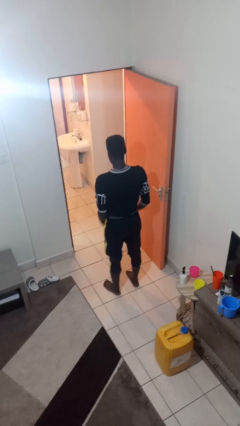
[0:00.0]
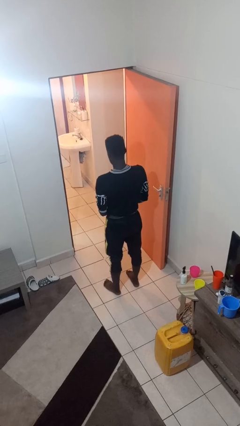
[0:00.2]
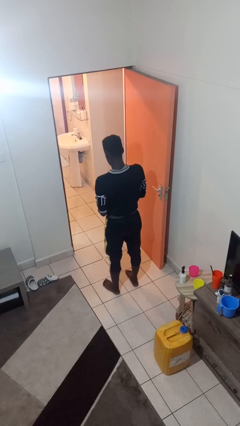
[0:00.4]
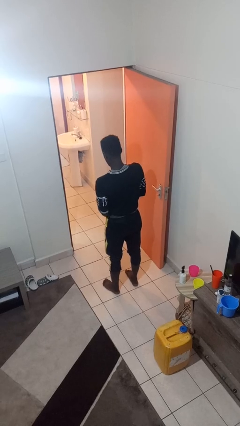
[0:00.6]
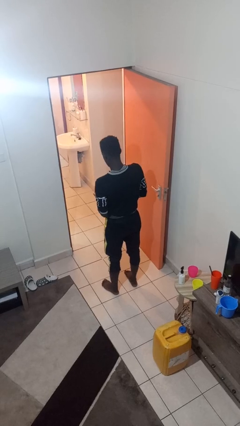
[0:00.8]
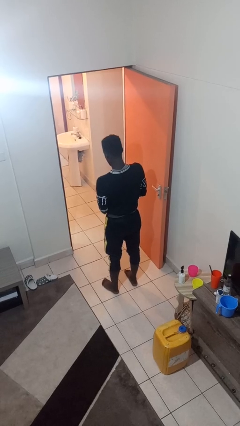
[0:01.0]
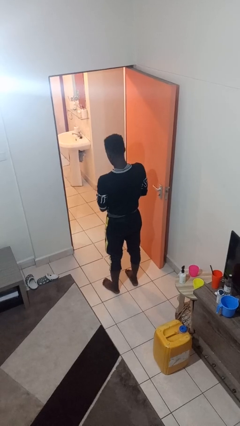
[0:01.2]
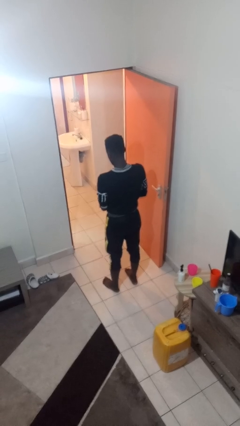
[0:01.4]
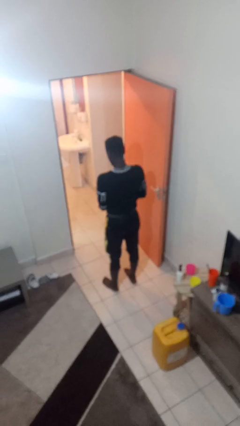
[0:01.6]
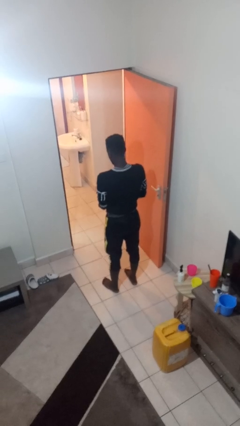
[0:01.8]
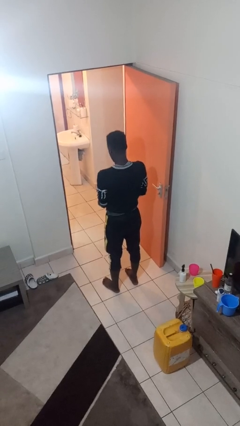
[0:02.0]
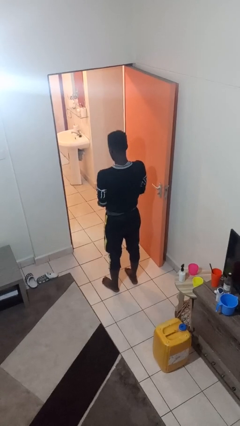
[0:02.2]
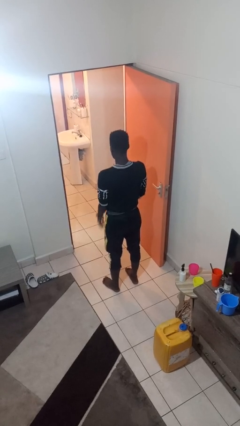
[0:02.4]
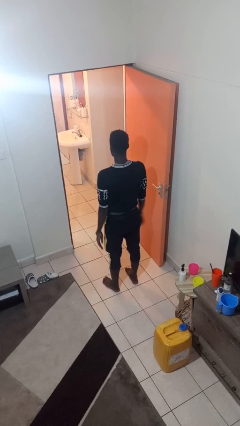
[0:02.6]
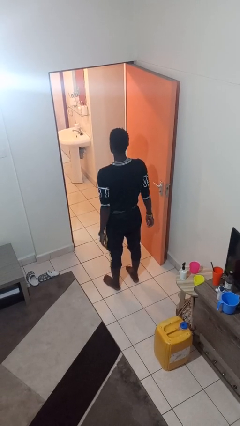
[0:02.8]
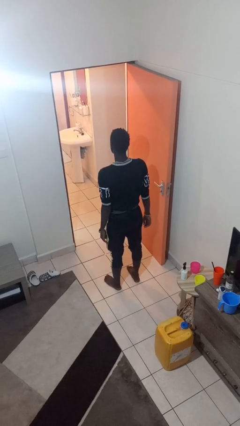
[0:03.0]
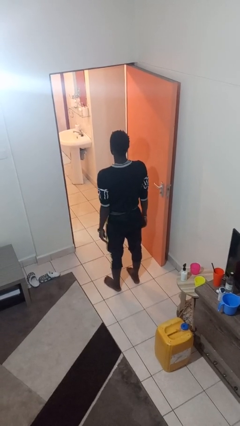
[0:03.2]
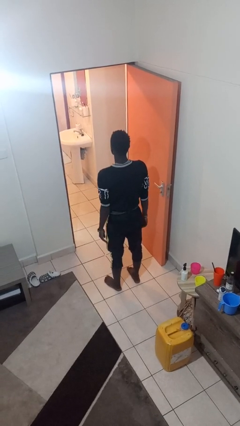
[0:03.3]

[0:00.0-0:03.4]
person puts on wristwatch

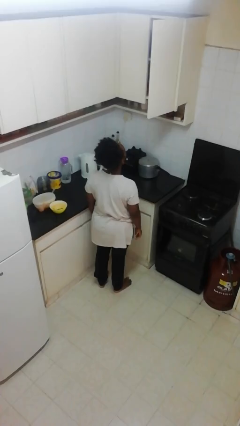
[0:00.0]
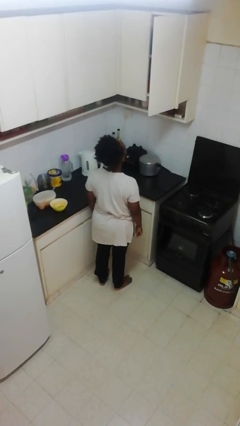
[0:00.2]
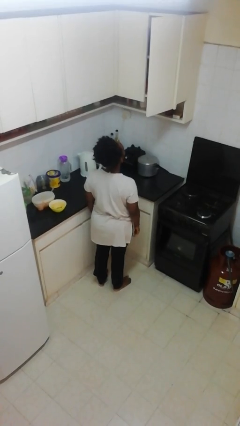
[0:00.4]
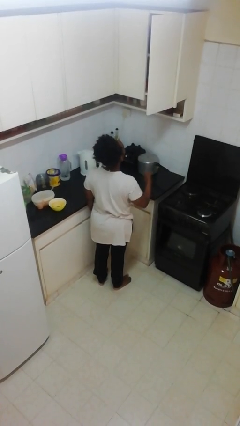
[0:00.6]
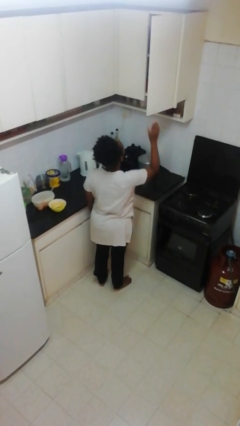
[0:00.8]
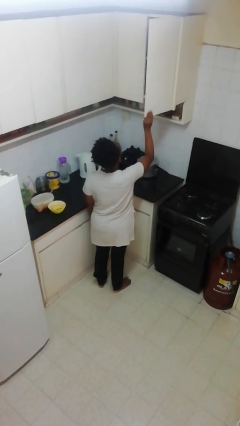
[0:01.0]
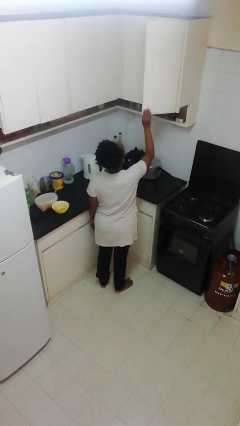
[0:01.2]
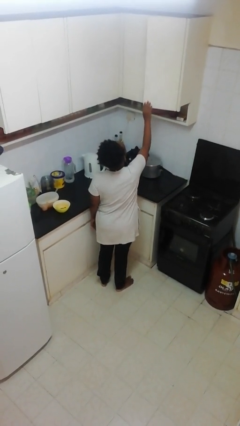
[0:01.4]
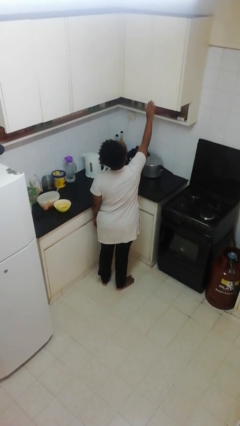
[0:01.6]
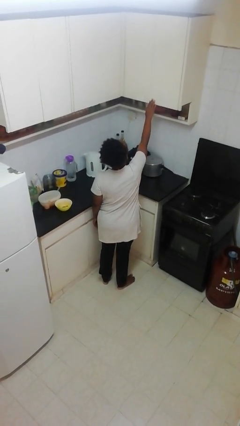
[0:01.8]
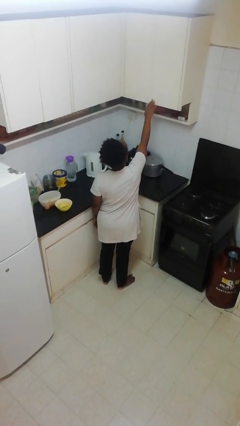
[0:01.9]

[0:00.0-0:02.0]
person closes cabinet

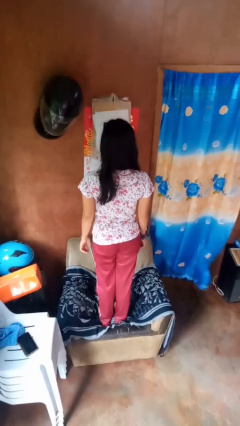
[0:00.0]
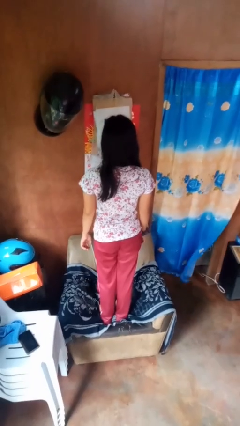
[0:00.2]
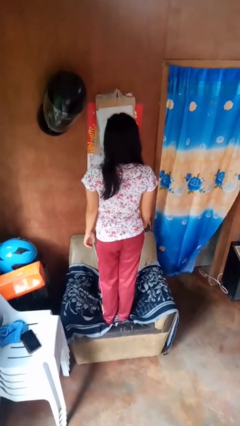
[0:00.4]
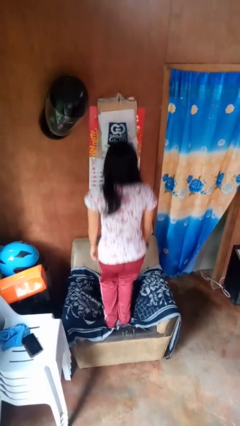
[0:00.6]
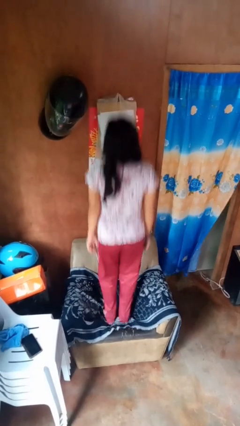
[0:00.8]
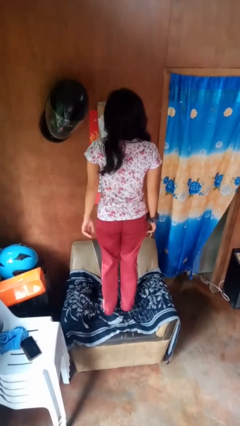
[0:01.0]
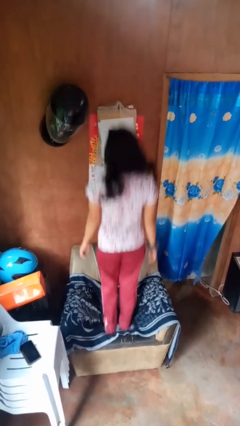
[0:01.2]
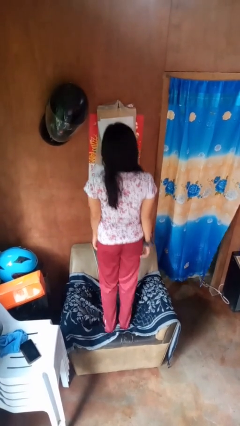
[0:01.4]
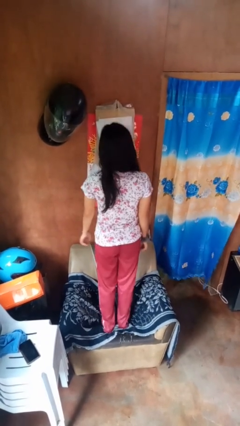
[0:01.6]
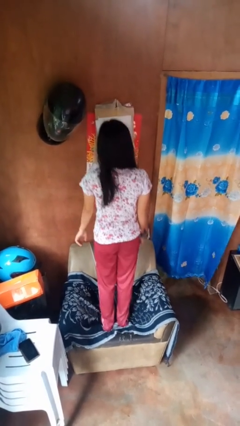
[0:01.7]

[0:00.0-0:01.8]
person jumps on couch

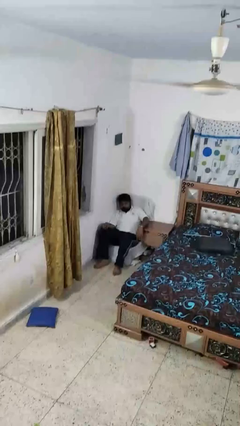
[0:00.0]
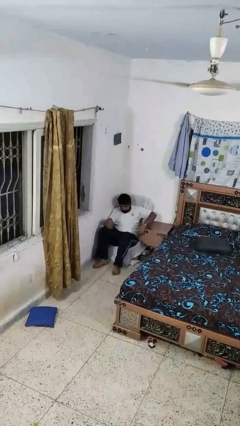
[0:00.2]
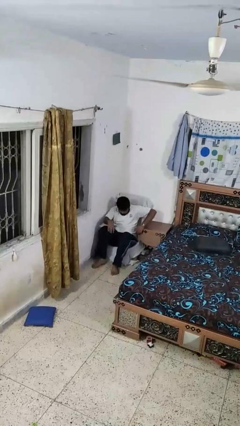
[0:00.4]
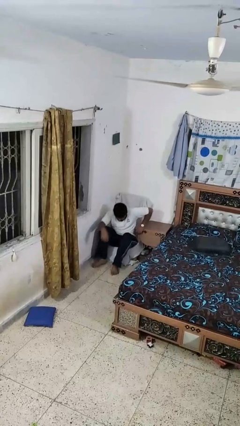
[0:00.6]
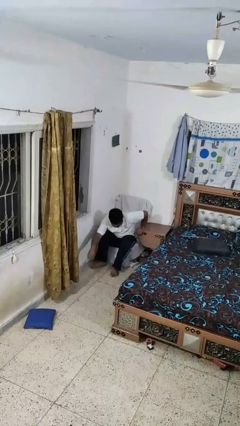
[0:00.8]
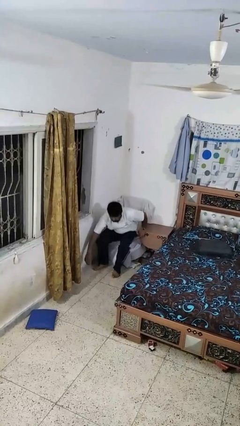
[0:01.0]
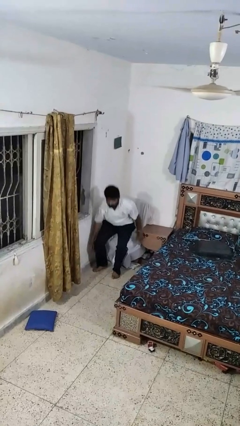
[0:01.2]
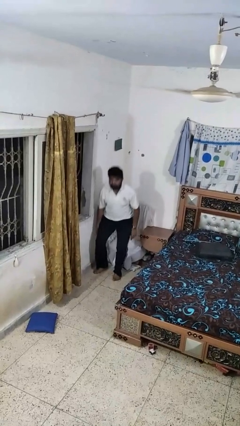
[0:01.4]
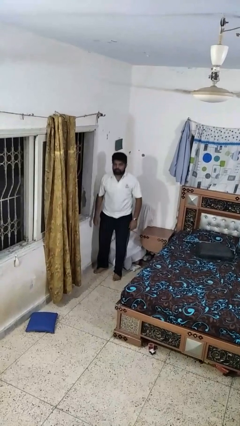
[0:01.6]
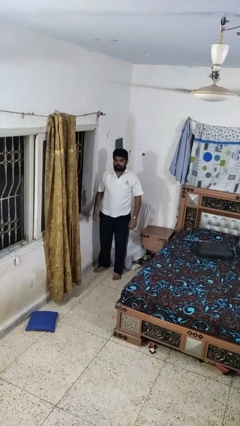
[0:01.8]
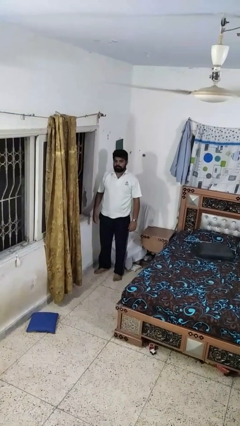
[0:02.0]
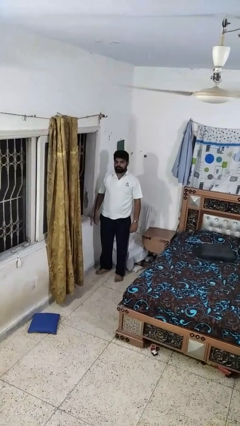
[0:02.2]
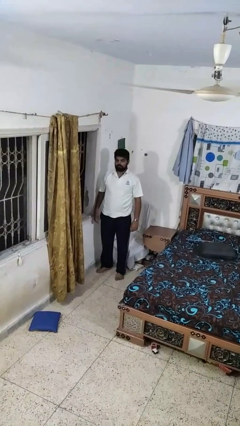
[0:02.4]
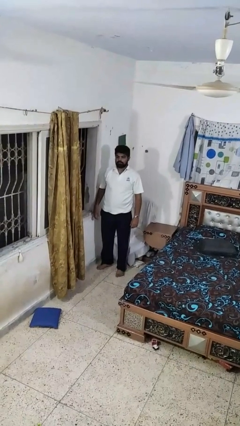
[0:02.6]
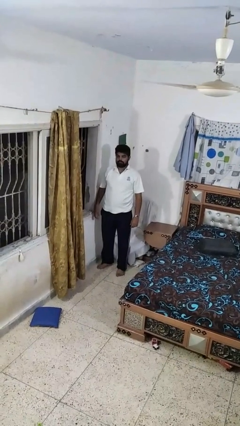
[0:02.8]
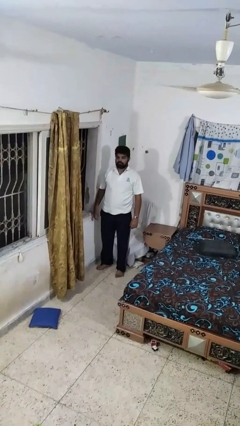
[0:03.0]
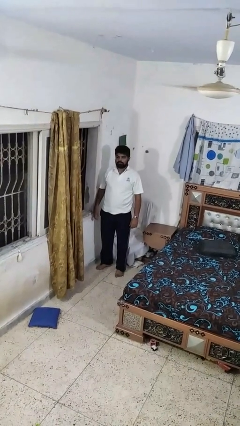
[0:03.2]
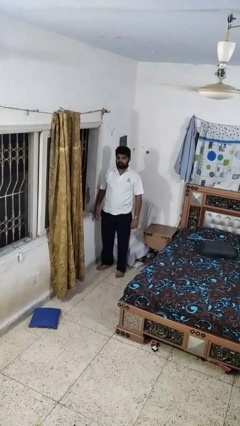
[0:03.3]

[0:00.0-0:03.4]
person stands up

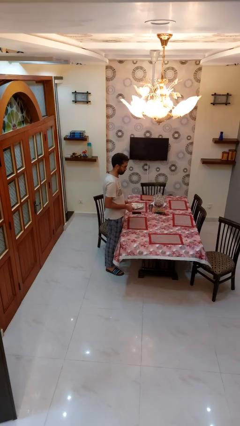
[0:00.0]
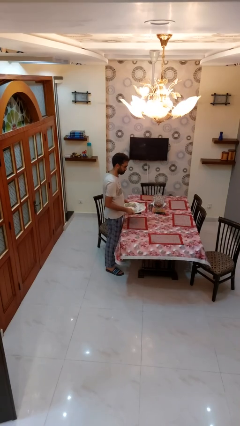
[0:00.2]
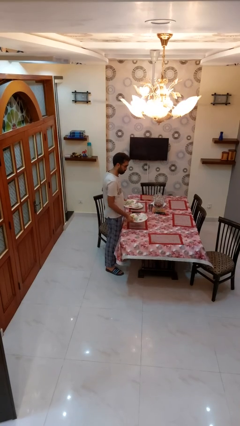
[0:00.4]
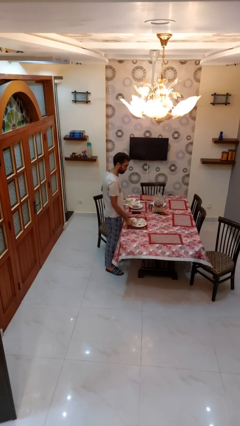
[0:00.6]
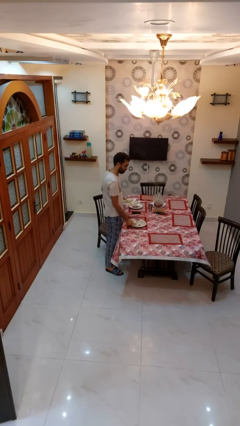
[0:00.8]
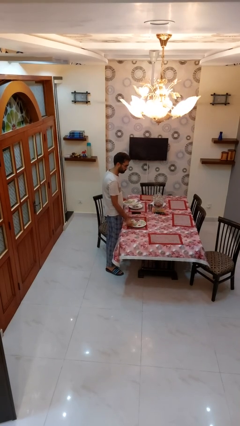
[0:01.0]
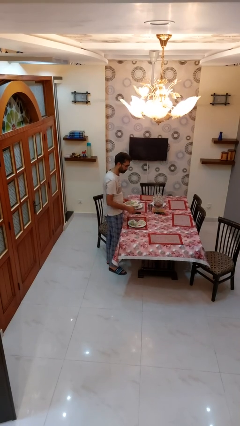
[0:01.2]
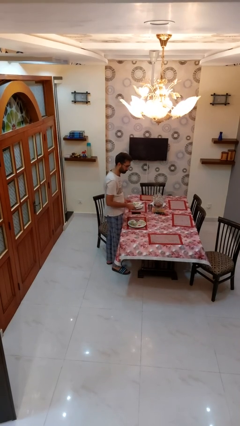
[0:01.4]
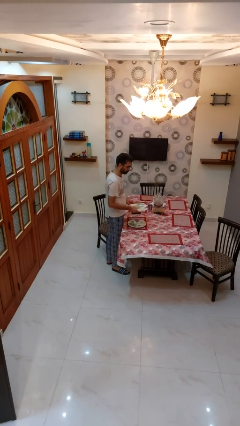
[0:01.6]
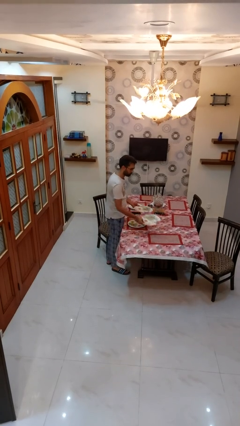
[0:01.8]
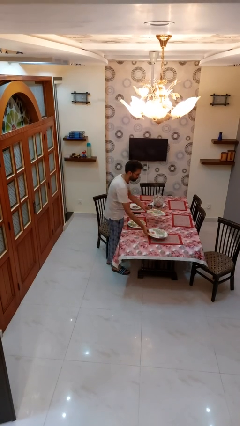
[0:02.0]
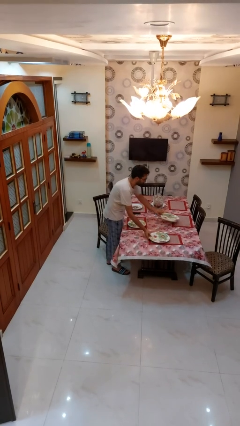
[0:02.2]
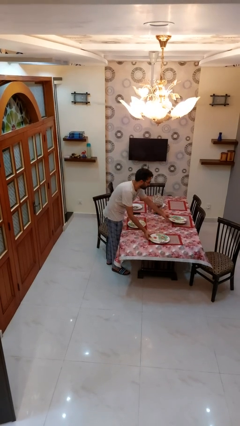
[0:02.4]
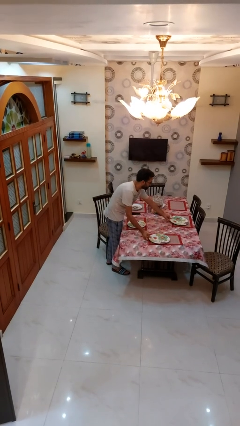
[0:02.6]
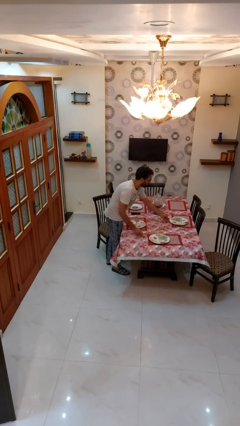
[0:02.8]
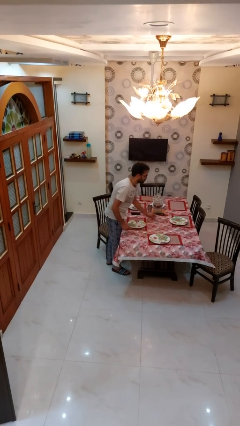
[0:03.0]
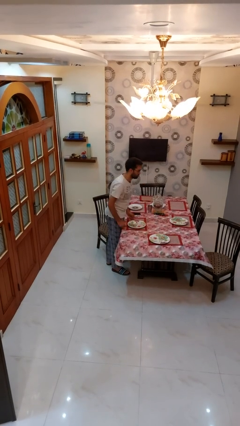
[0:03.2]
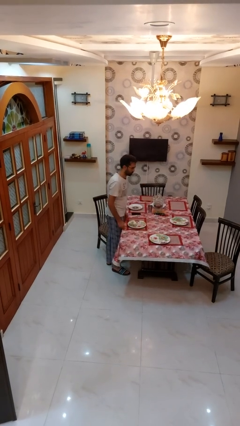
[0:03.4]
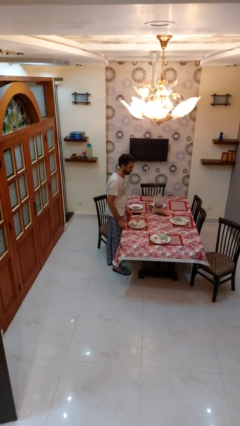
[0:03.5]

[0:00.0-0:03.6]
person sets table

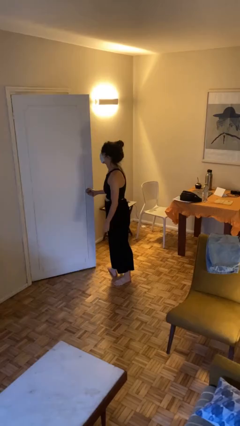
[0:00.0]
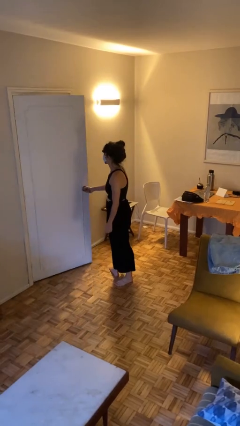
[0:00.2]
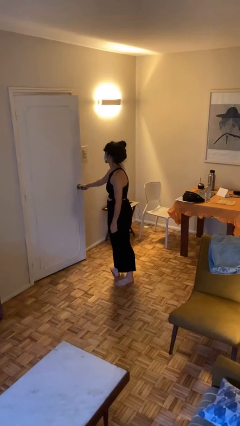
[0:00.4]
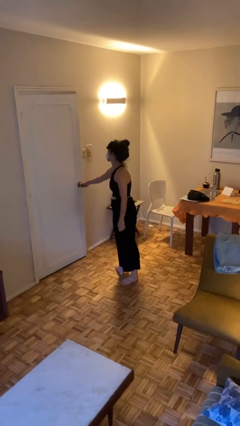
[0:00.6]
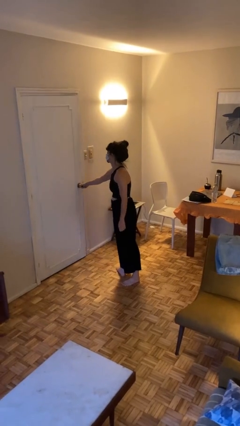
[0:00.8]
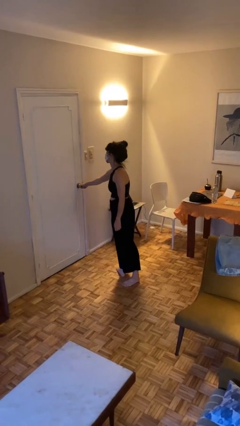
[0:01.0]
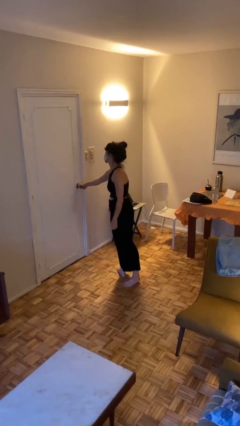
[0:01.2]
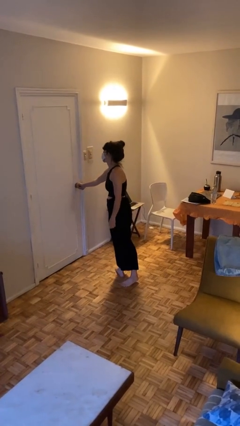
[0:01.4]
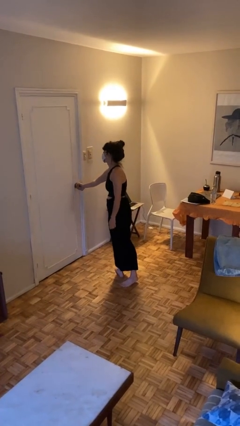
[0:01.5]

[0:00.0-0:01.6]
person closes facility door

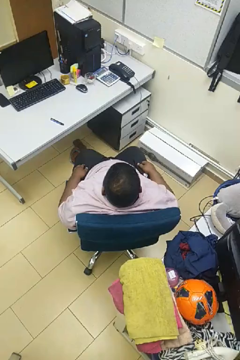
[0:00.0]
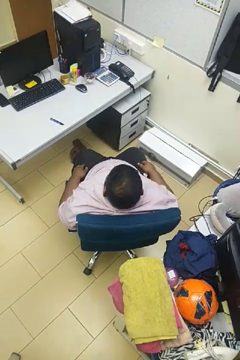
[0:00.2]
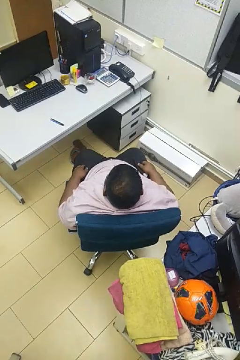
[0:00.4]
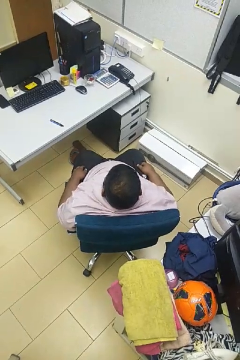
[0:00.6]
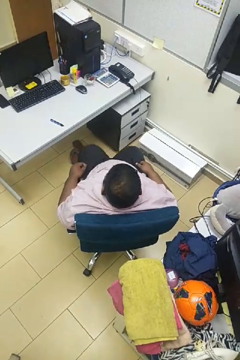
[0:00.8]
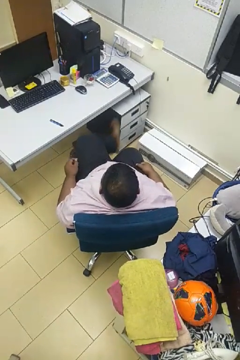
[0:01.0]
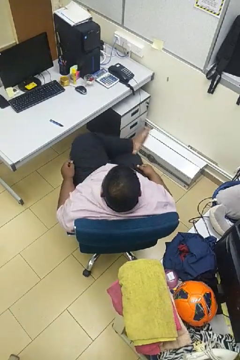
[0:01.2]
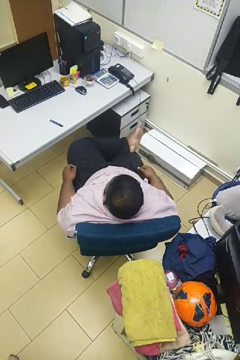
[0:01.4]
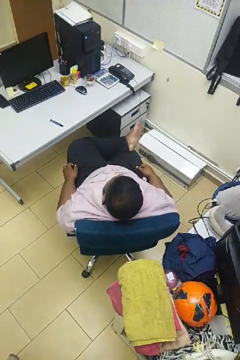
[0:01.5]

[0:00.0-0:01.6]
person crosses legs
